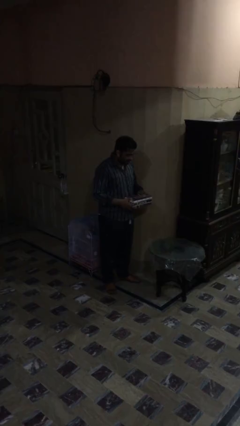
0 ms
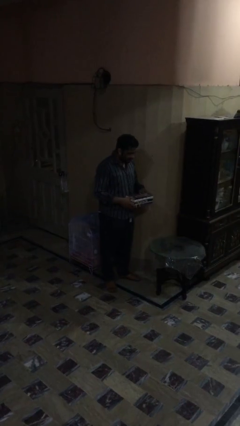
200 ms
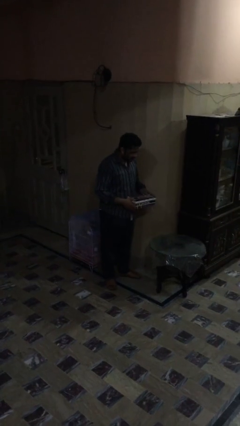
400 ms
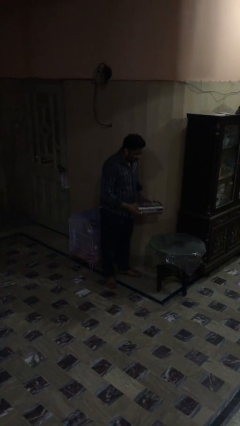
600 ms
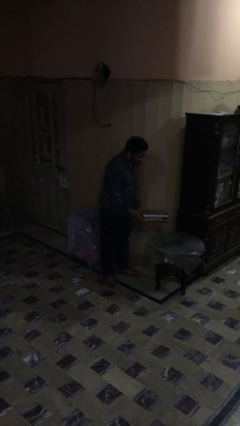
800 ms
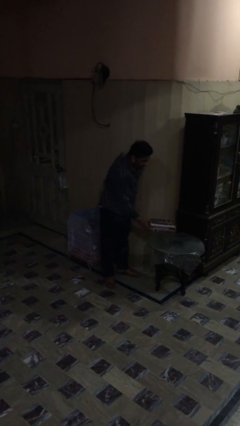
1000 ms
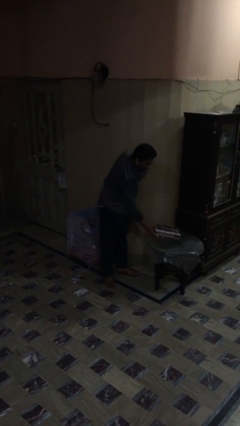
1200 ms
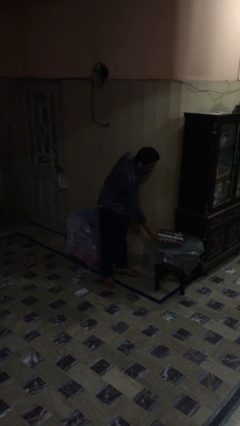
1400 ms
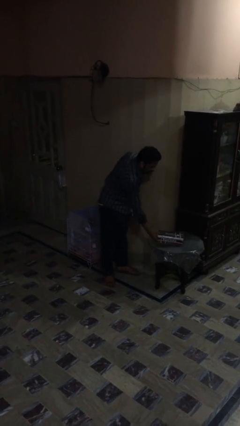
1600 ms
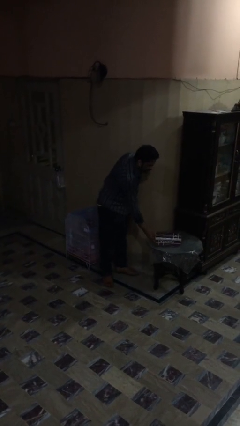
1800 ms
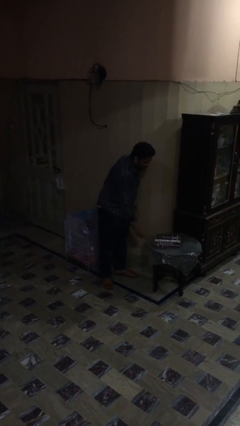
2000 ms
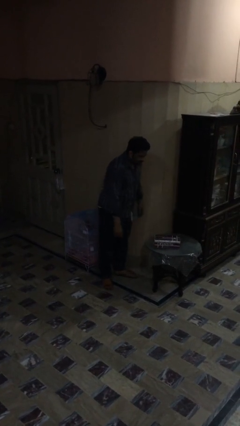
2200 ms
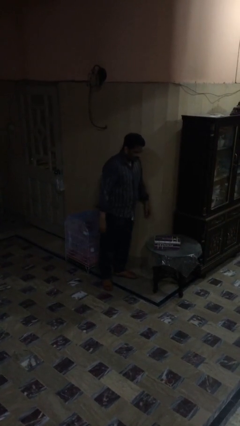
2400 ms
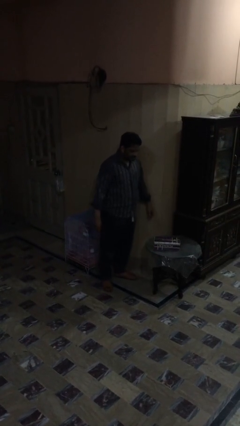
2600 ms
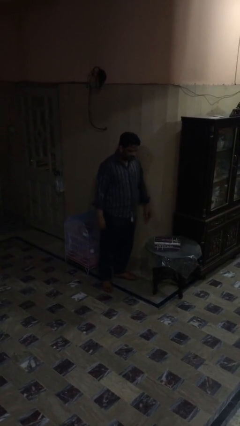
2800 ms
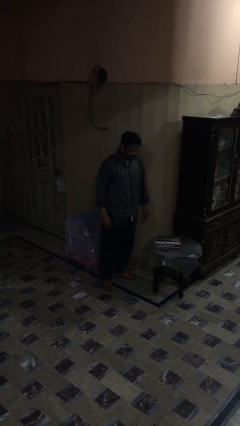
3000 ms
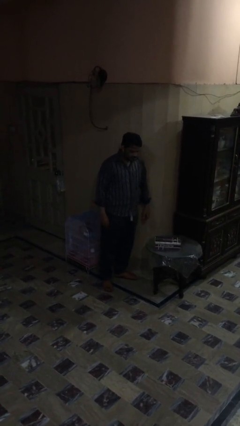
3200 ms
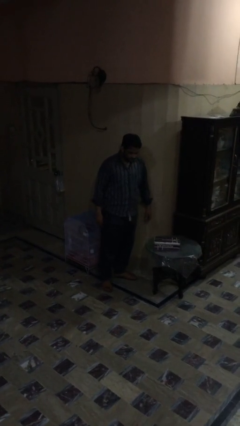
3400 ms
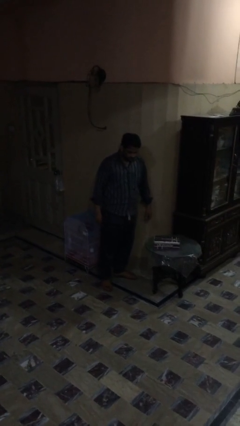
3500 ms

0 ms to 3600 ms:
person puts down object on table

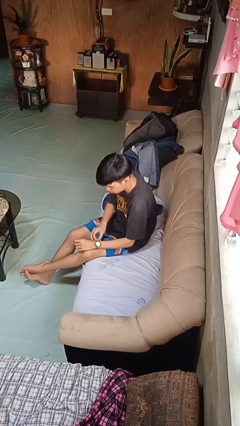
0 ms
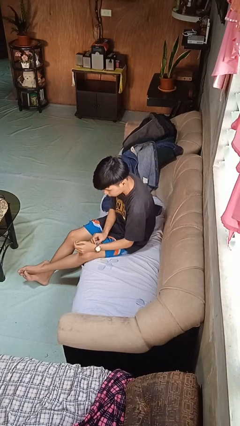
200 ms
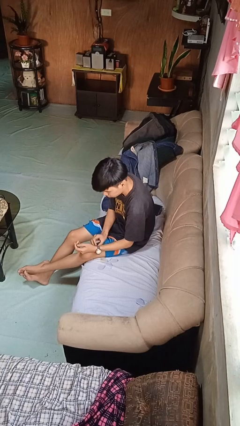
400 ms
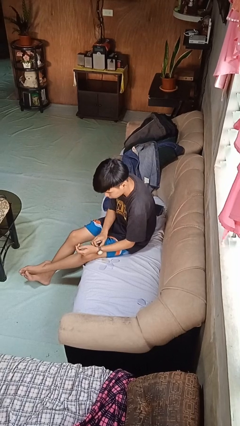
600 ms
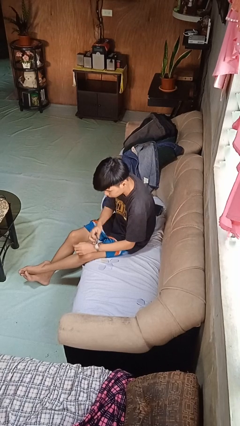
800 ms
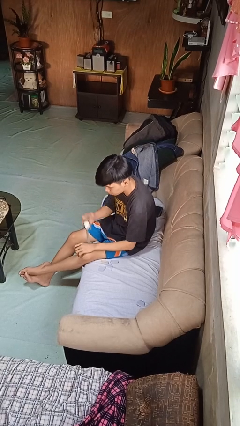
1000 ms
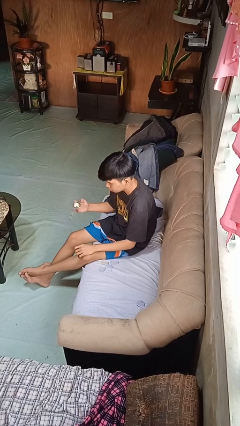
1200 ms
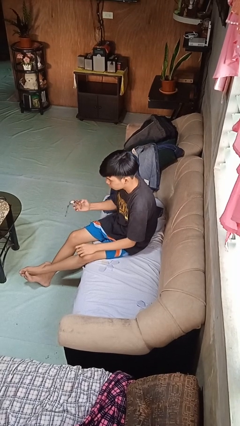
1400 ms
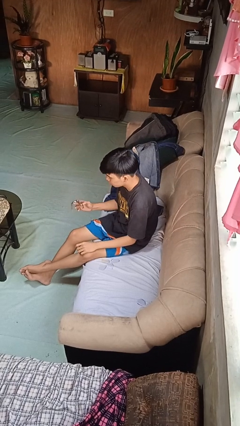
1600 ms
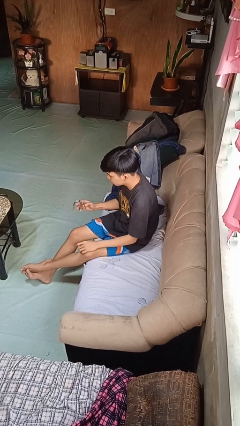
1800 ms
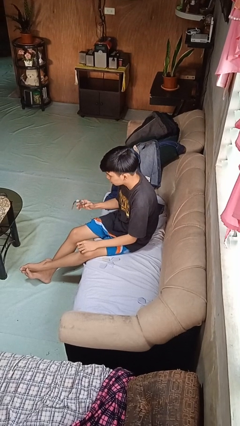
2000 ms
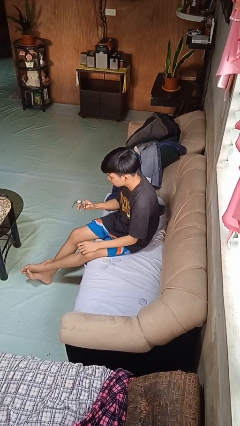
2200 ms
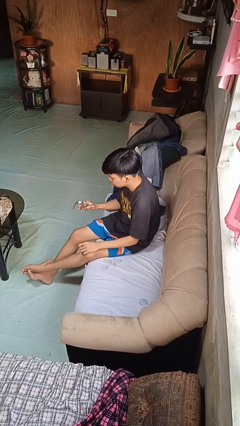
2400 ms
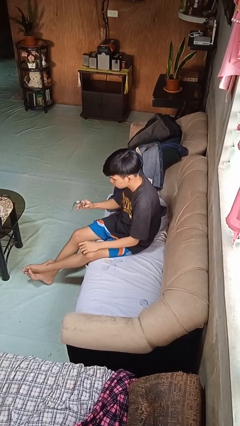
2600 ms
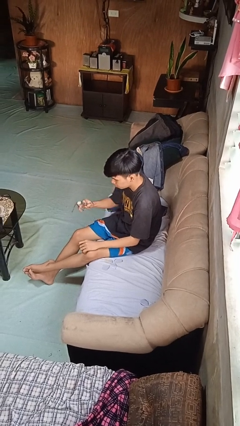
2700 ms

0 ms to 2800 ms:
person takes off wristwatch

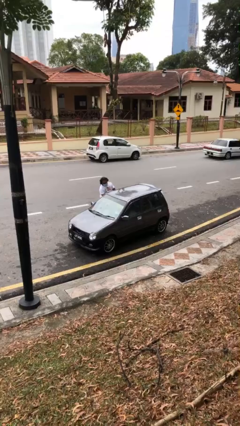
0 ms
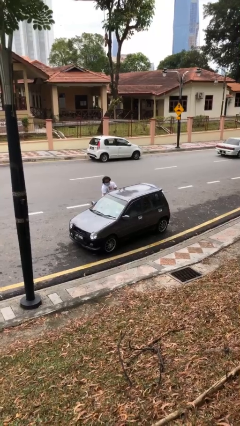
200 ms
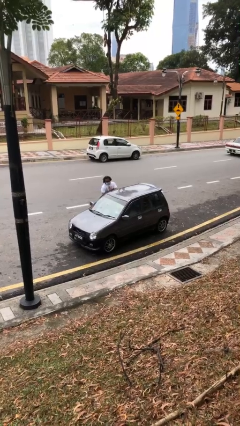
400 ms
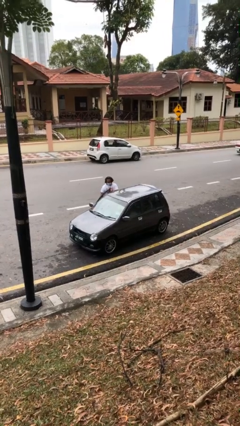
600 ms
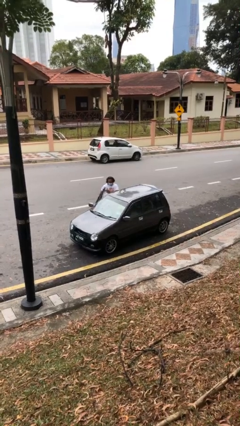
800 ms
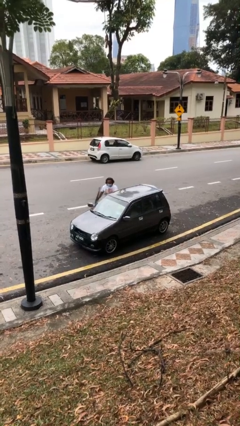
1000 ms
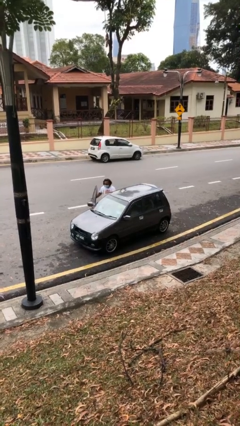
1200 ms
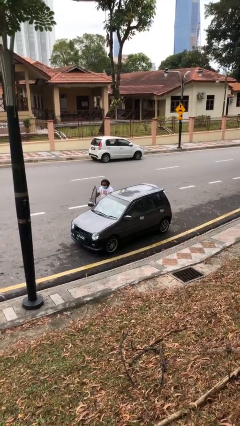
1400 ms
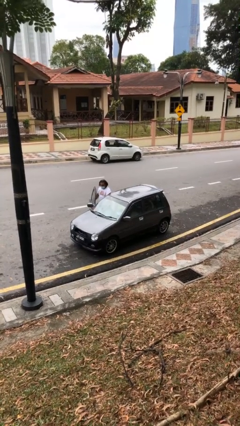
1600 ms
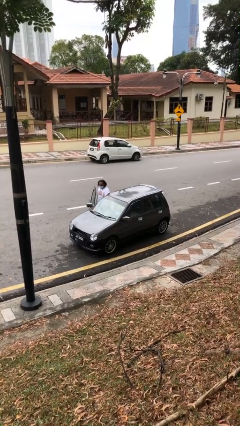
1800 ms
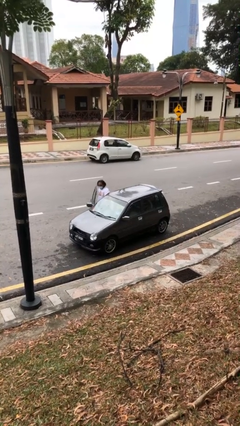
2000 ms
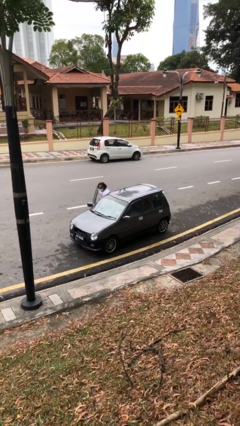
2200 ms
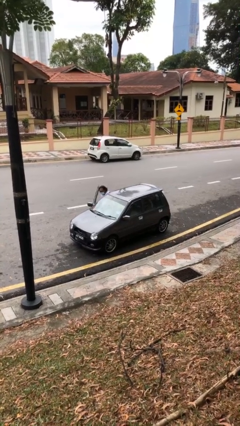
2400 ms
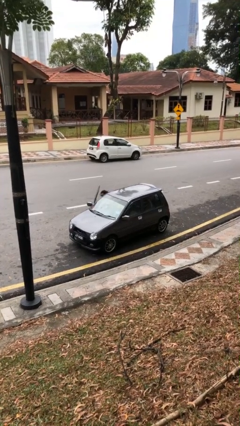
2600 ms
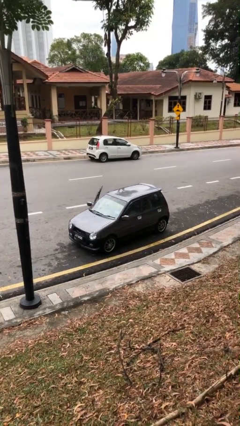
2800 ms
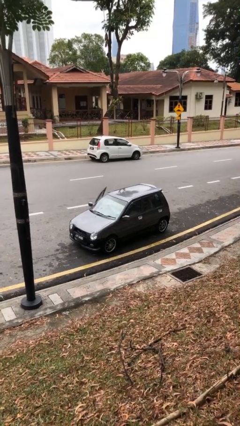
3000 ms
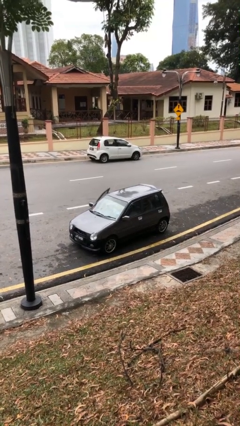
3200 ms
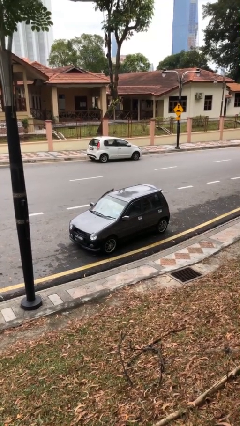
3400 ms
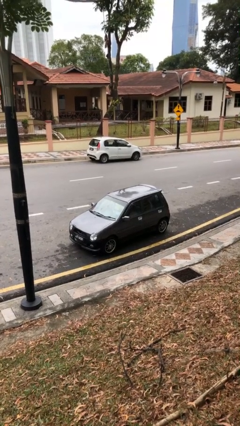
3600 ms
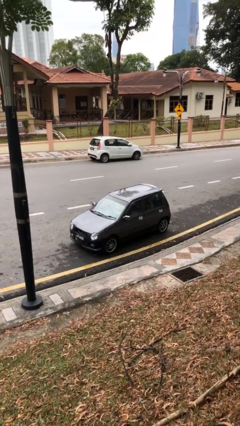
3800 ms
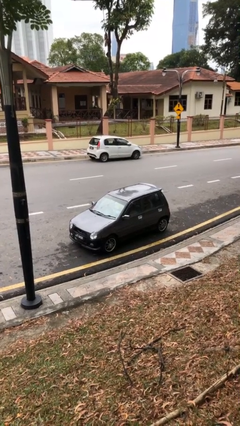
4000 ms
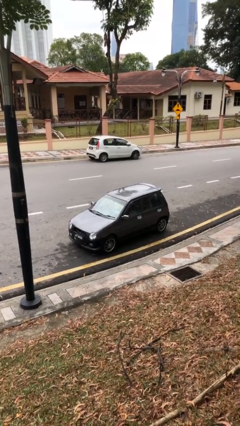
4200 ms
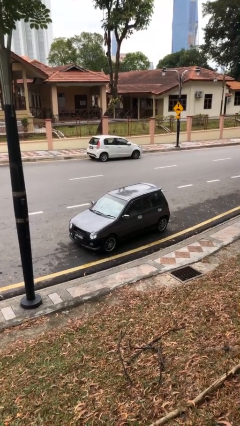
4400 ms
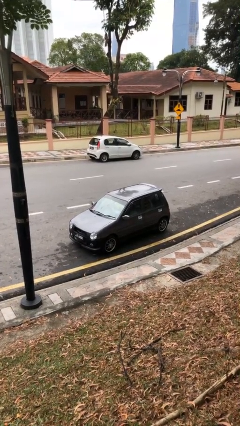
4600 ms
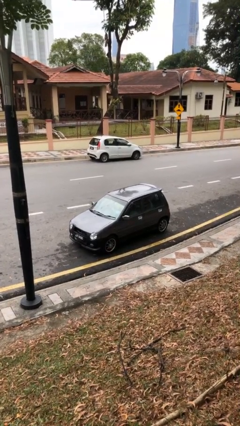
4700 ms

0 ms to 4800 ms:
car picks up person

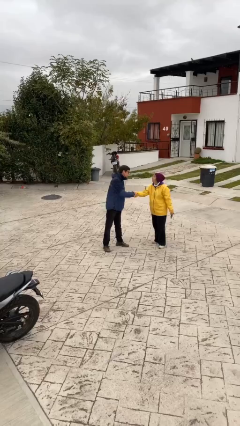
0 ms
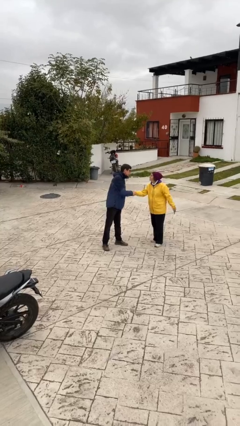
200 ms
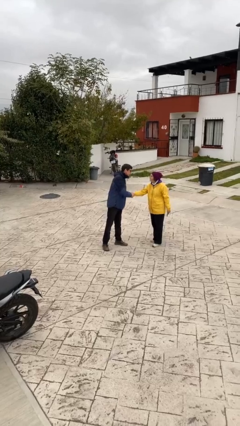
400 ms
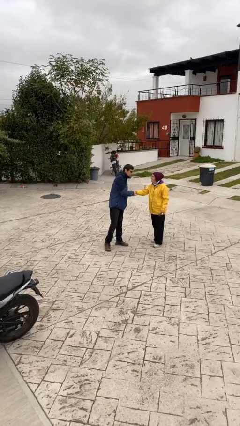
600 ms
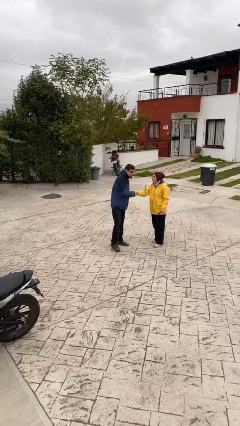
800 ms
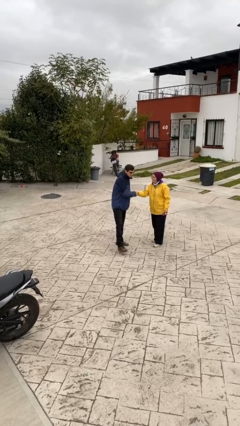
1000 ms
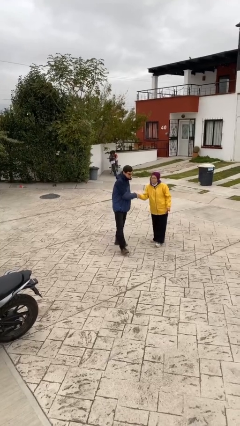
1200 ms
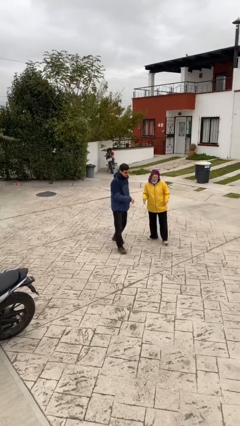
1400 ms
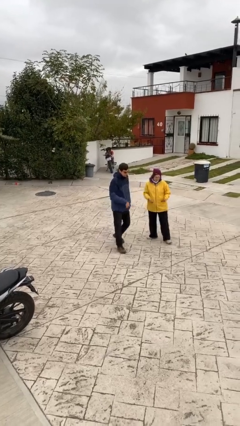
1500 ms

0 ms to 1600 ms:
person shakes hand

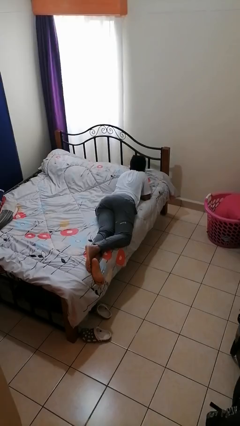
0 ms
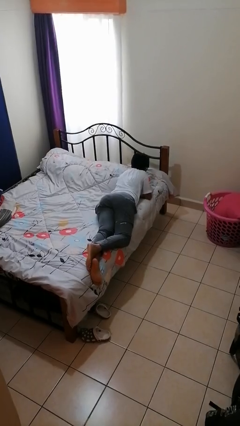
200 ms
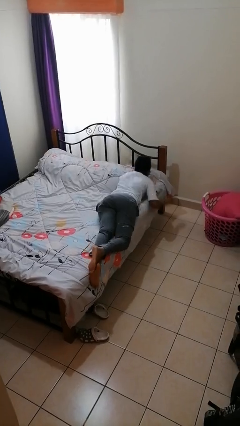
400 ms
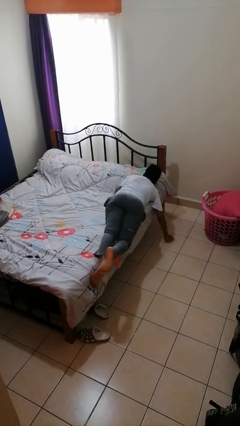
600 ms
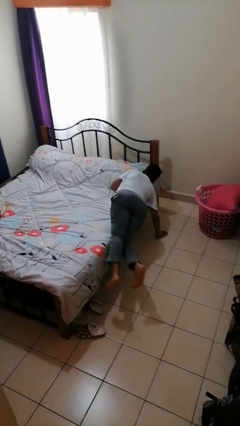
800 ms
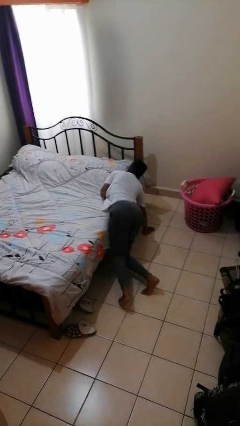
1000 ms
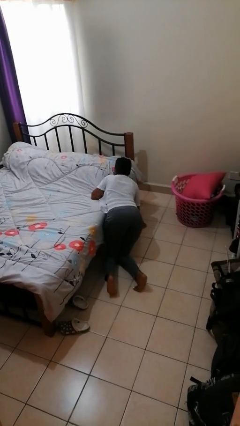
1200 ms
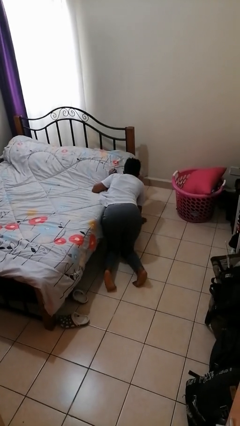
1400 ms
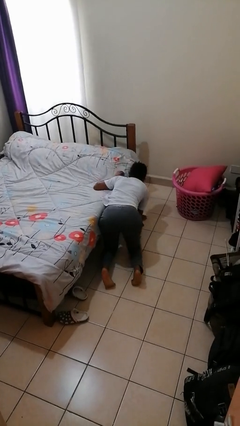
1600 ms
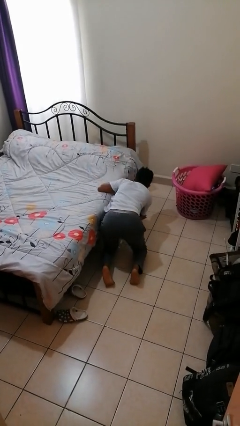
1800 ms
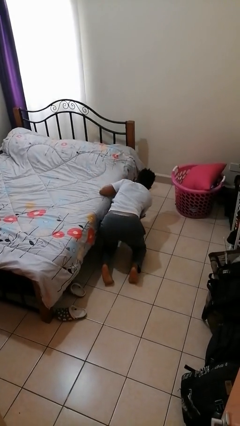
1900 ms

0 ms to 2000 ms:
person falls from bed

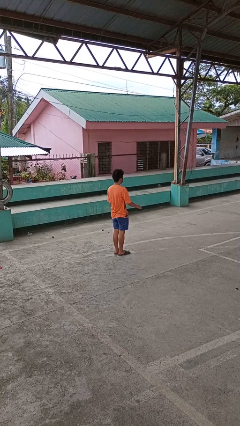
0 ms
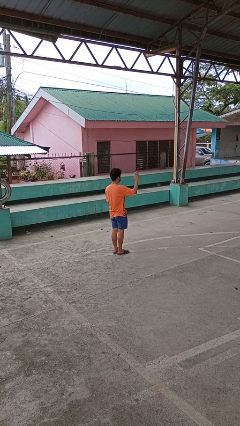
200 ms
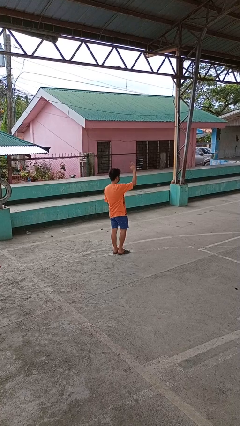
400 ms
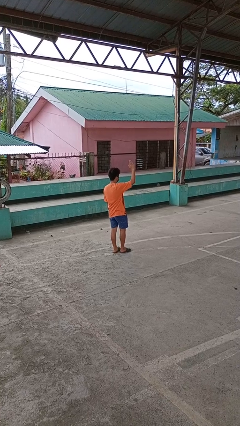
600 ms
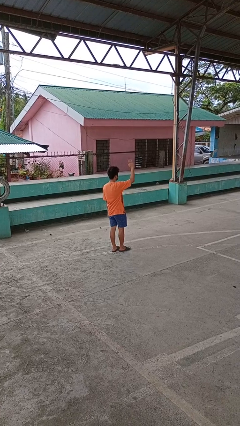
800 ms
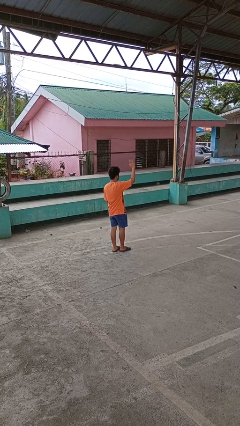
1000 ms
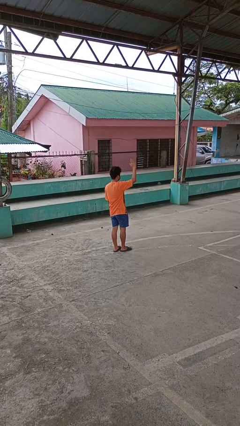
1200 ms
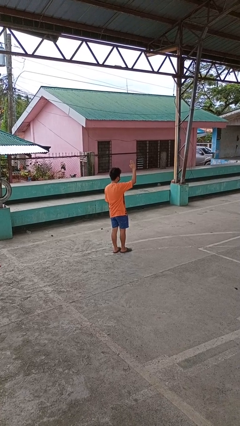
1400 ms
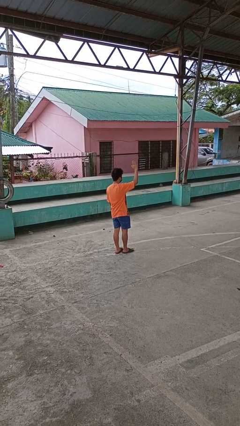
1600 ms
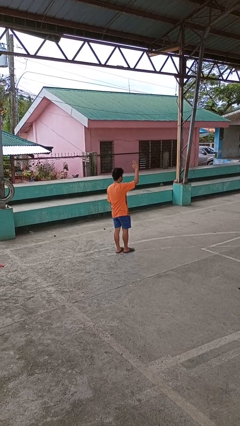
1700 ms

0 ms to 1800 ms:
person gestures raise hand

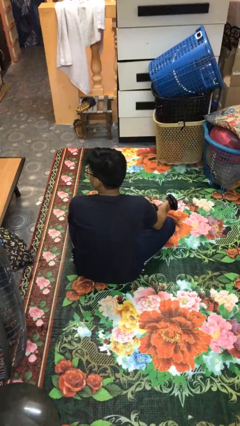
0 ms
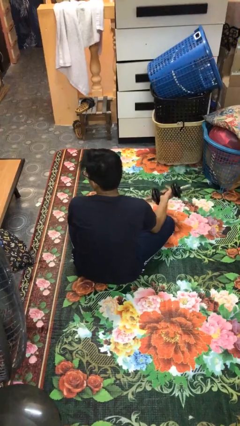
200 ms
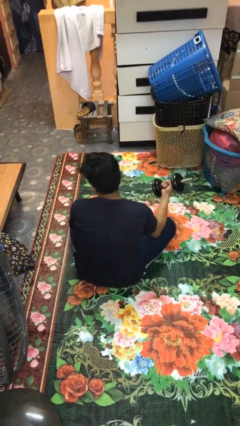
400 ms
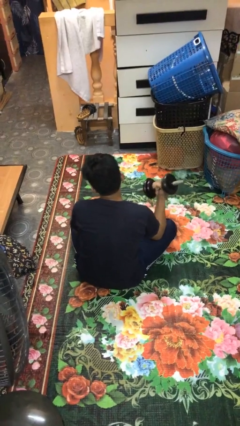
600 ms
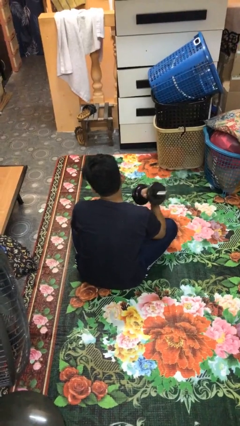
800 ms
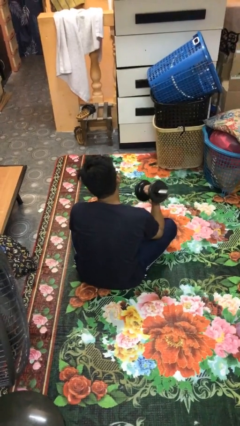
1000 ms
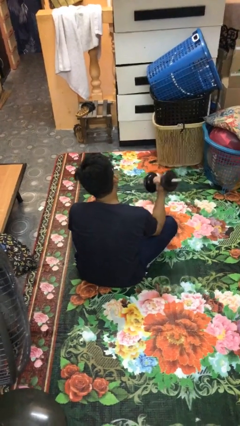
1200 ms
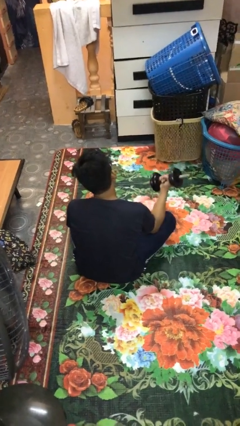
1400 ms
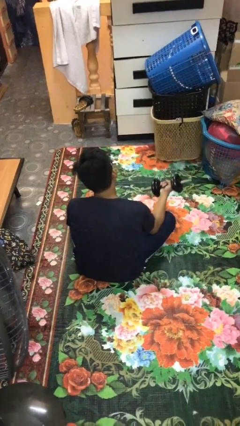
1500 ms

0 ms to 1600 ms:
person lifts dumbbells
